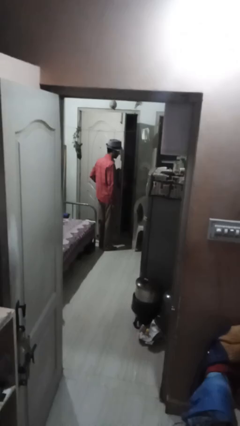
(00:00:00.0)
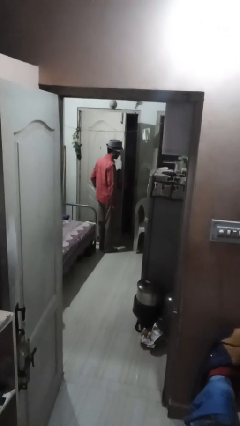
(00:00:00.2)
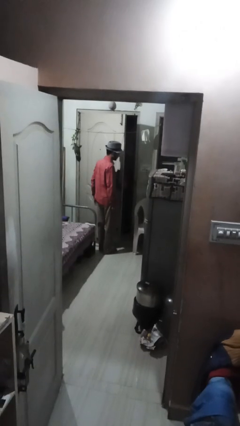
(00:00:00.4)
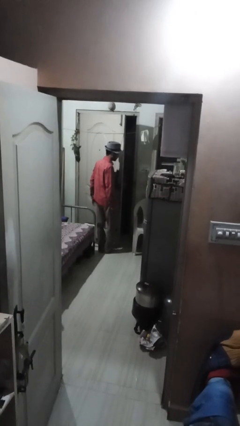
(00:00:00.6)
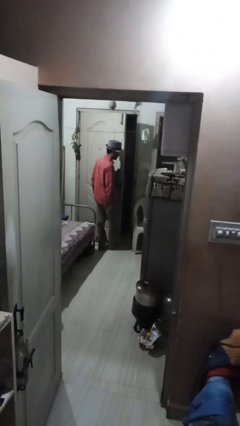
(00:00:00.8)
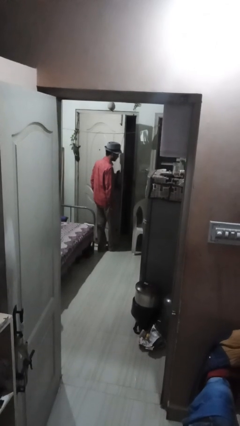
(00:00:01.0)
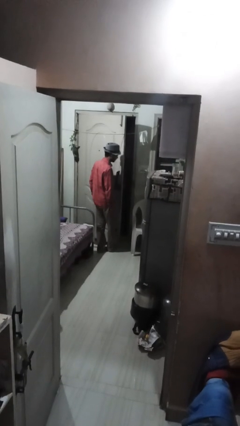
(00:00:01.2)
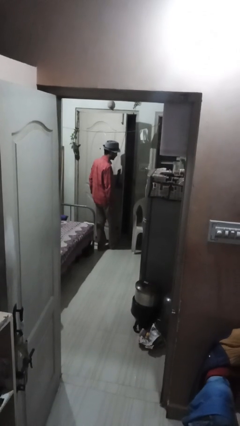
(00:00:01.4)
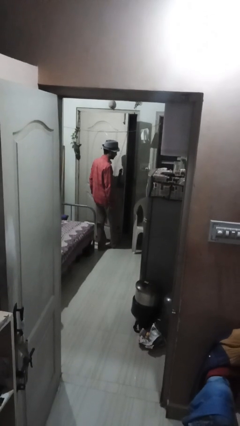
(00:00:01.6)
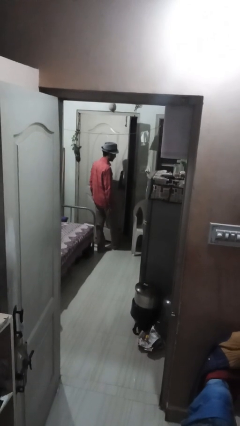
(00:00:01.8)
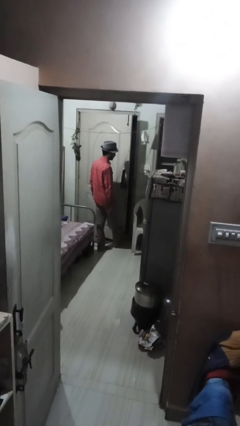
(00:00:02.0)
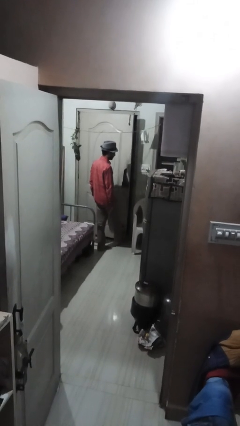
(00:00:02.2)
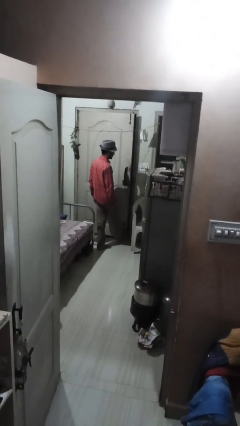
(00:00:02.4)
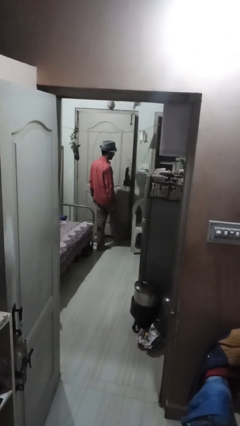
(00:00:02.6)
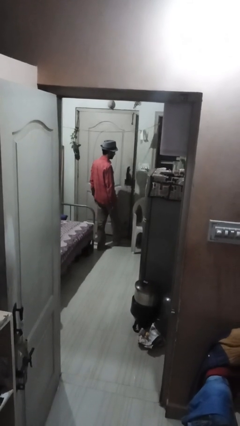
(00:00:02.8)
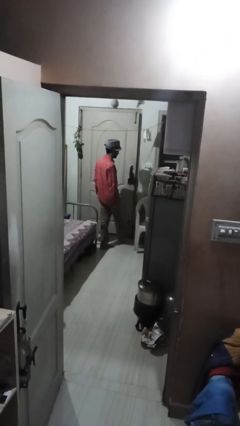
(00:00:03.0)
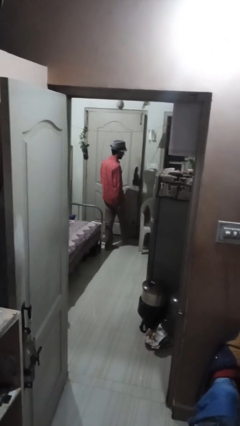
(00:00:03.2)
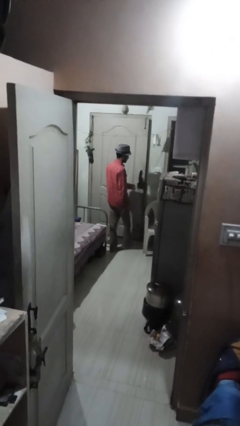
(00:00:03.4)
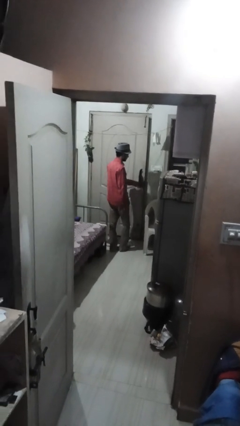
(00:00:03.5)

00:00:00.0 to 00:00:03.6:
person closes door with foot

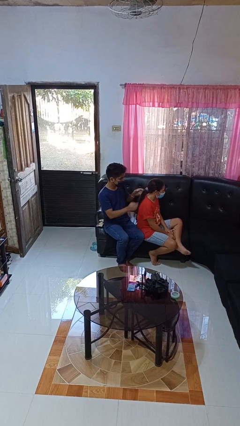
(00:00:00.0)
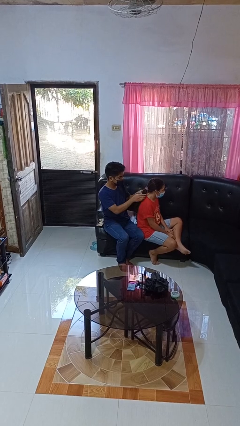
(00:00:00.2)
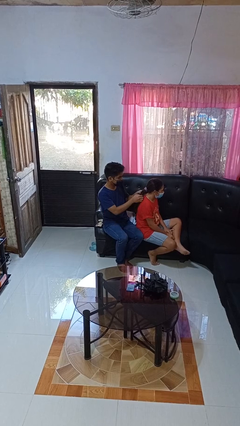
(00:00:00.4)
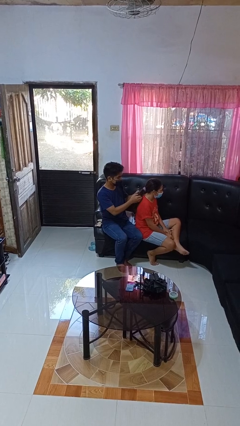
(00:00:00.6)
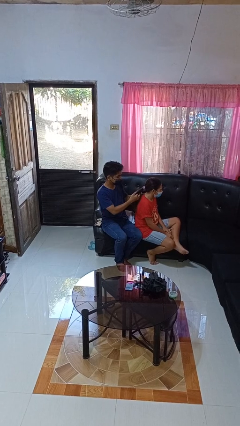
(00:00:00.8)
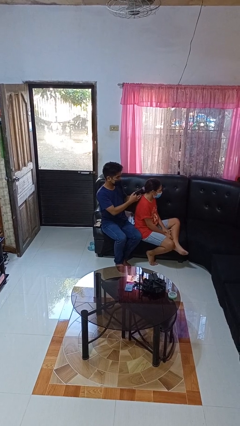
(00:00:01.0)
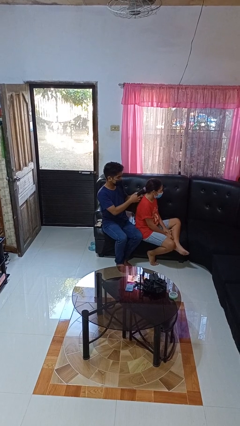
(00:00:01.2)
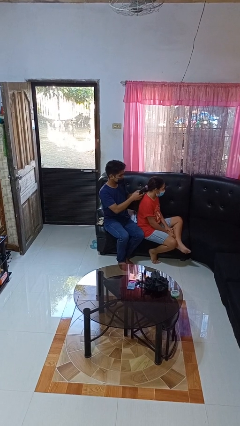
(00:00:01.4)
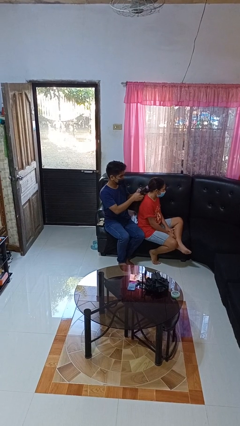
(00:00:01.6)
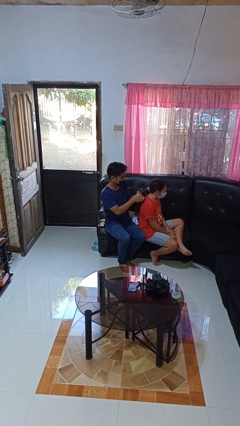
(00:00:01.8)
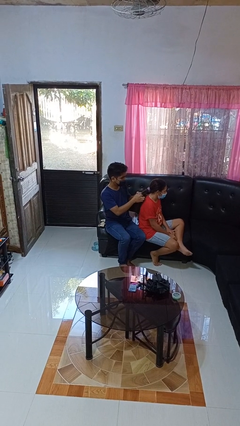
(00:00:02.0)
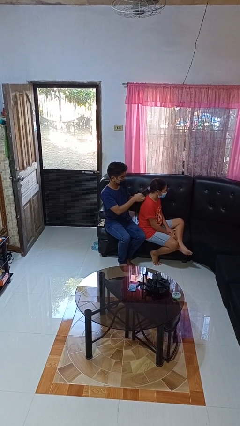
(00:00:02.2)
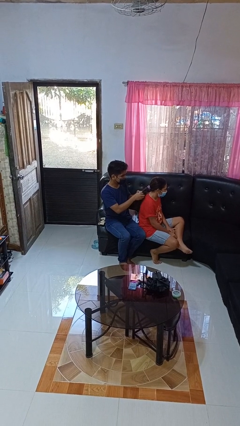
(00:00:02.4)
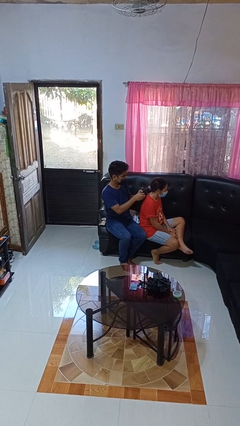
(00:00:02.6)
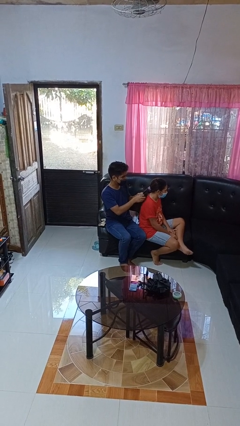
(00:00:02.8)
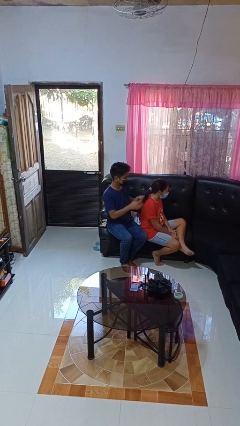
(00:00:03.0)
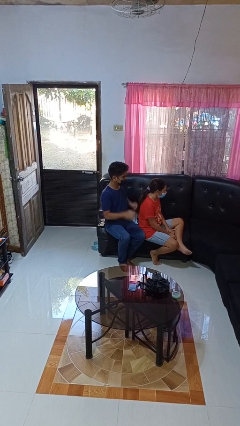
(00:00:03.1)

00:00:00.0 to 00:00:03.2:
person braids hair of person

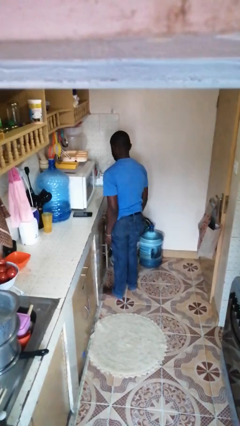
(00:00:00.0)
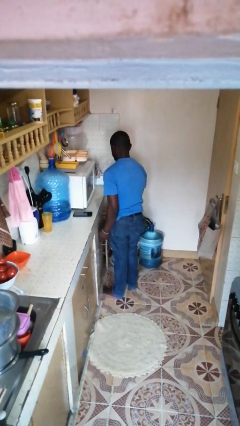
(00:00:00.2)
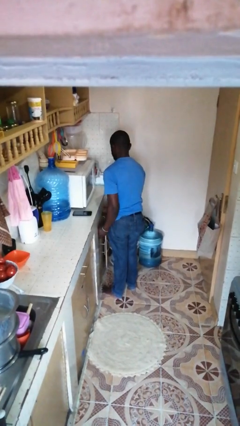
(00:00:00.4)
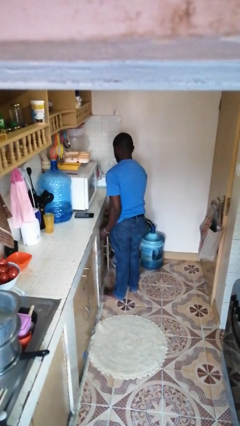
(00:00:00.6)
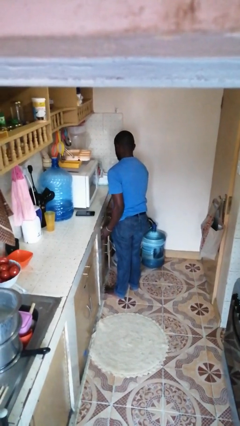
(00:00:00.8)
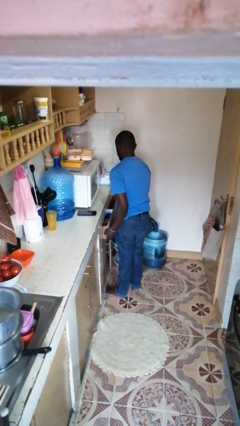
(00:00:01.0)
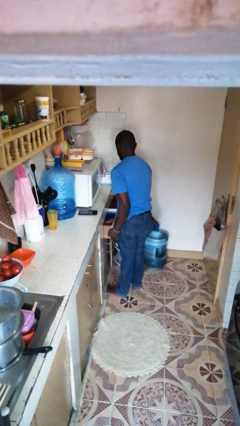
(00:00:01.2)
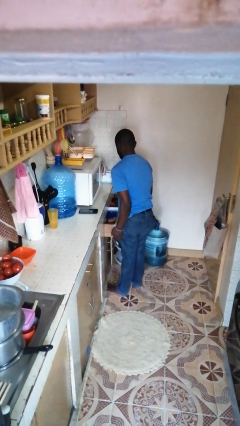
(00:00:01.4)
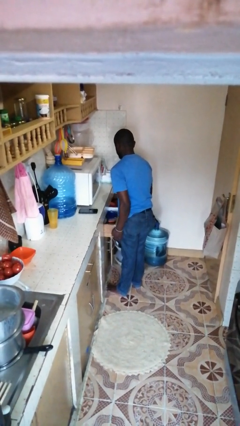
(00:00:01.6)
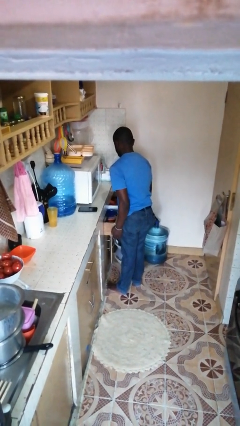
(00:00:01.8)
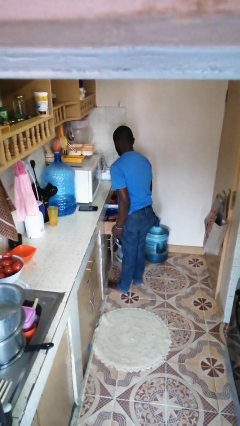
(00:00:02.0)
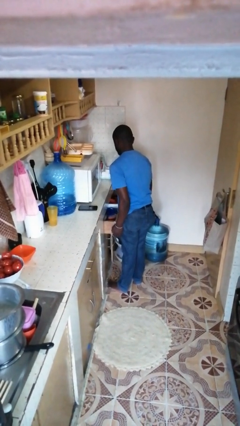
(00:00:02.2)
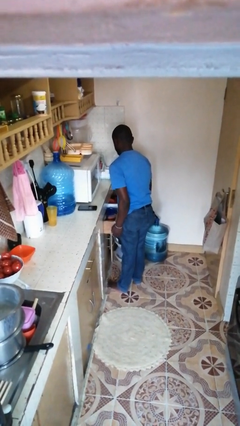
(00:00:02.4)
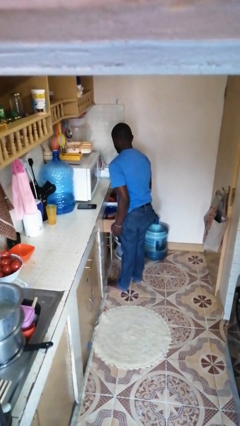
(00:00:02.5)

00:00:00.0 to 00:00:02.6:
person opens kitchen drawer

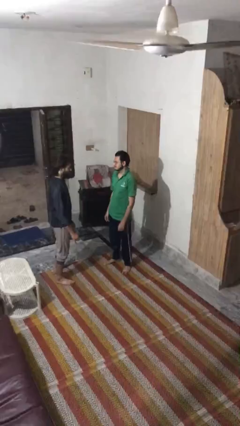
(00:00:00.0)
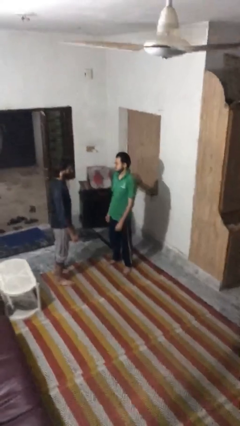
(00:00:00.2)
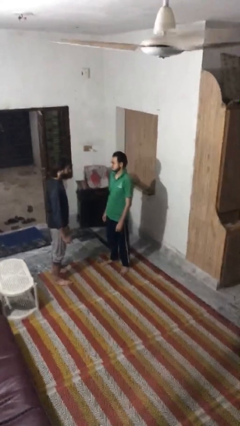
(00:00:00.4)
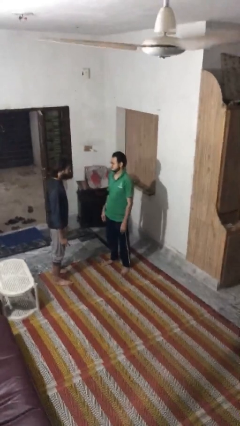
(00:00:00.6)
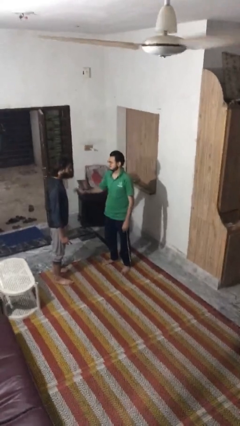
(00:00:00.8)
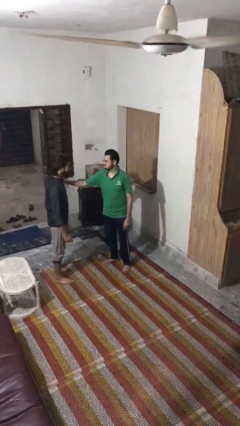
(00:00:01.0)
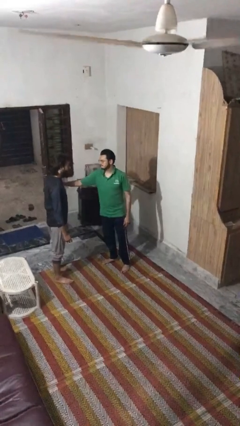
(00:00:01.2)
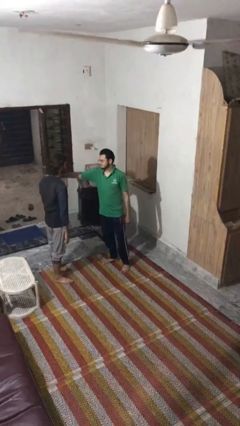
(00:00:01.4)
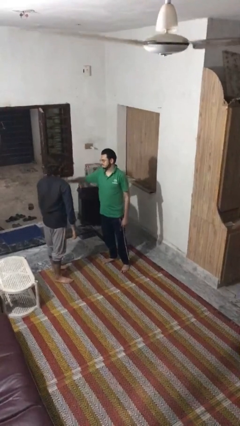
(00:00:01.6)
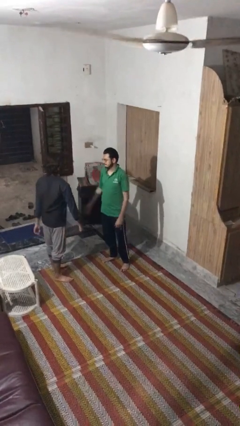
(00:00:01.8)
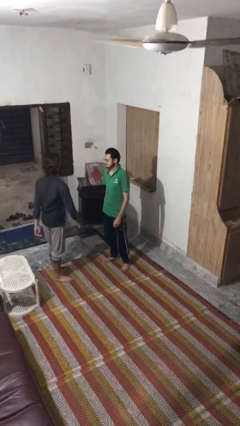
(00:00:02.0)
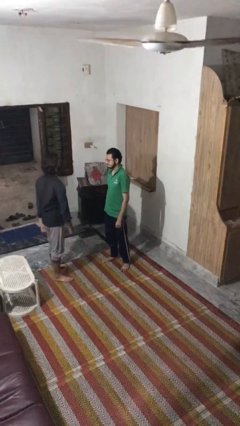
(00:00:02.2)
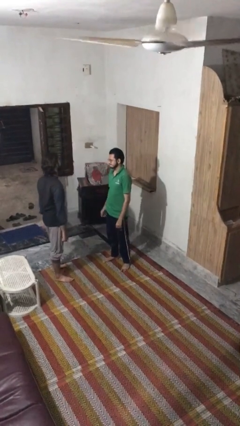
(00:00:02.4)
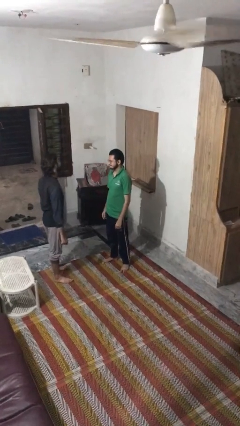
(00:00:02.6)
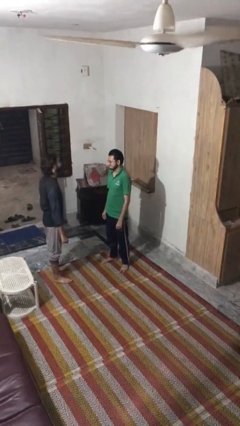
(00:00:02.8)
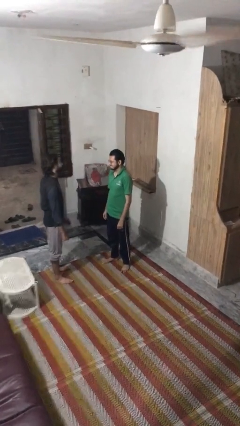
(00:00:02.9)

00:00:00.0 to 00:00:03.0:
person shoves person

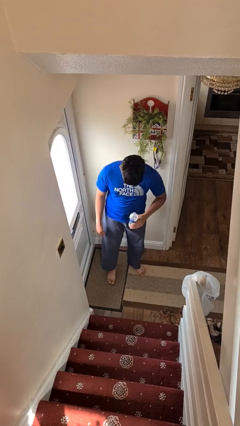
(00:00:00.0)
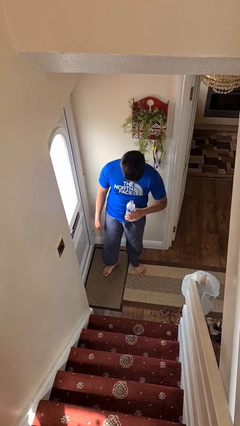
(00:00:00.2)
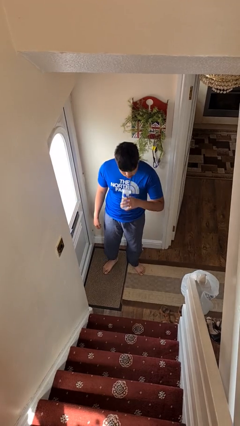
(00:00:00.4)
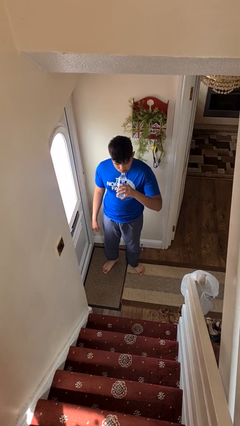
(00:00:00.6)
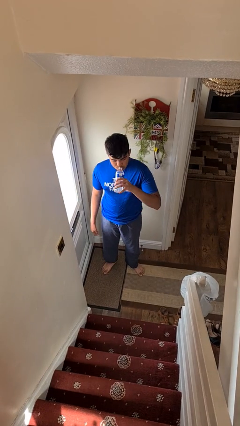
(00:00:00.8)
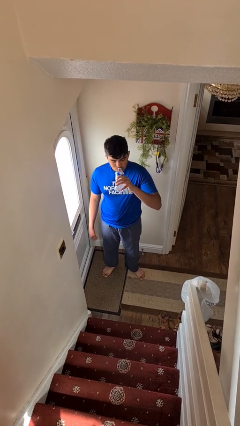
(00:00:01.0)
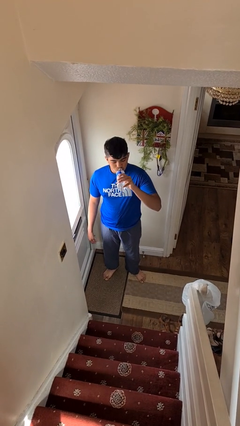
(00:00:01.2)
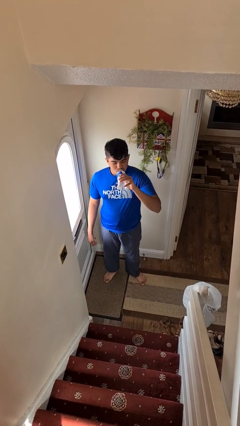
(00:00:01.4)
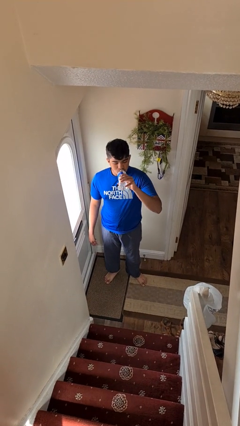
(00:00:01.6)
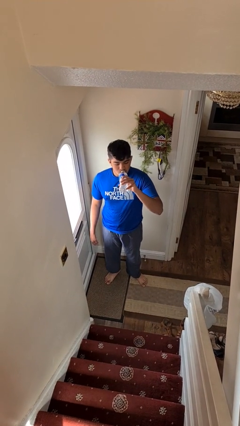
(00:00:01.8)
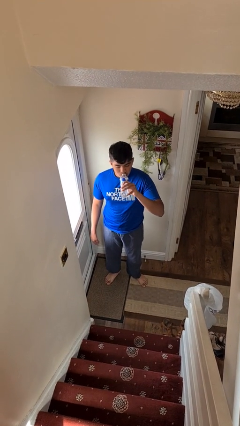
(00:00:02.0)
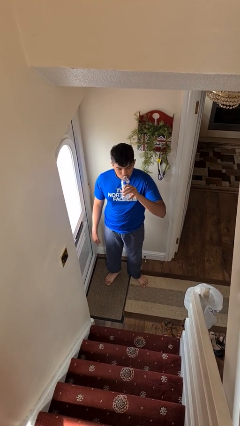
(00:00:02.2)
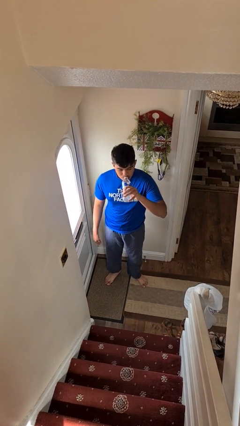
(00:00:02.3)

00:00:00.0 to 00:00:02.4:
person drinks from bottle

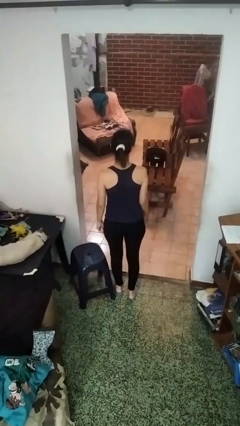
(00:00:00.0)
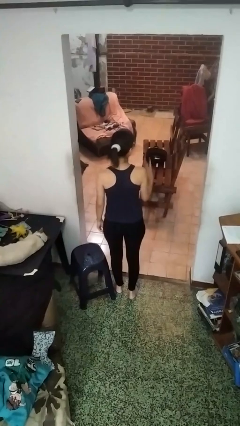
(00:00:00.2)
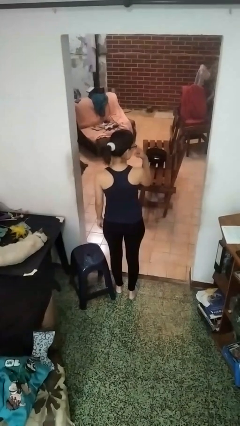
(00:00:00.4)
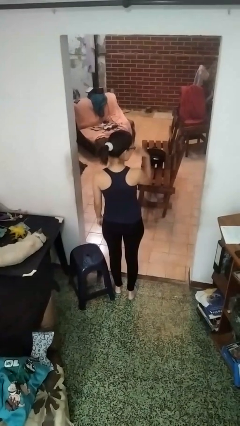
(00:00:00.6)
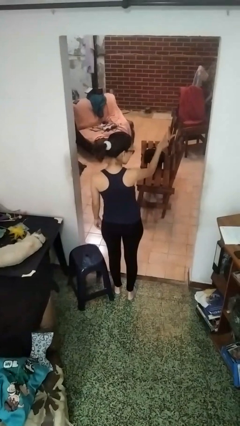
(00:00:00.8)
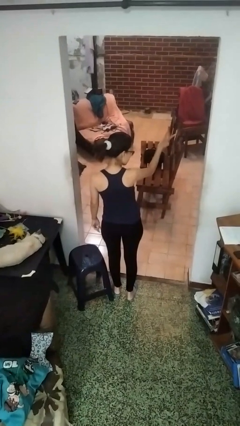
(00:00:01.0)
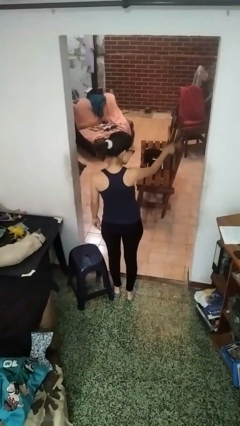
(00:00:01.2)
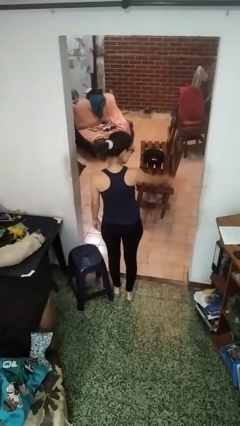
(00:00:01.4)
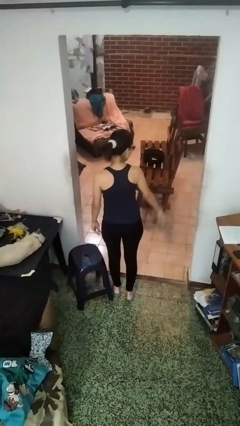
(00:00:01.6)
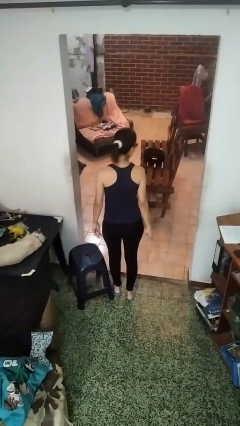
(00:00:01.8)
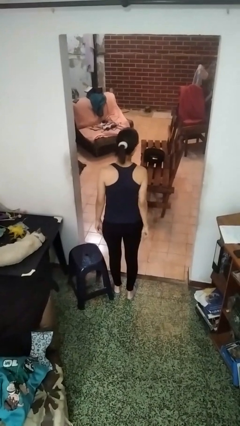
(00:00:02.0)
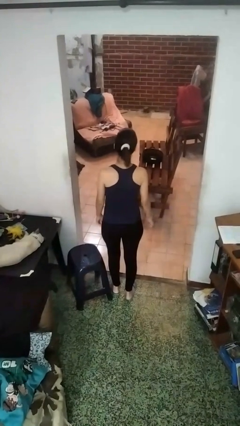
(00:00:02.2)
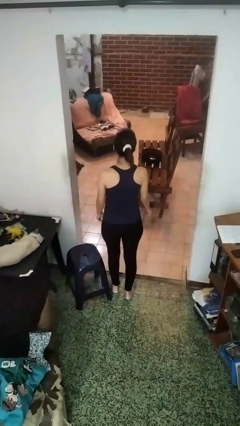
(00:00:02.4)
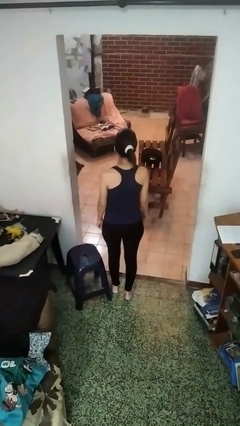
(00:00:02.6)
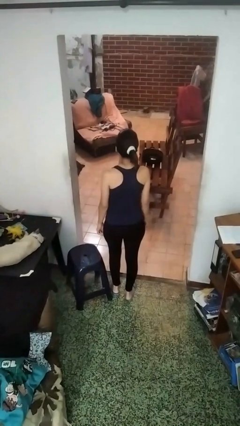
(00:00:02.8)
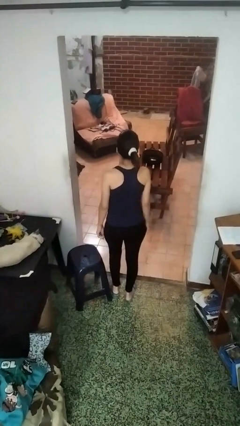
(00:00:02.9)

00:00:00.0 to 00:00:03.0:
person gestures watch closely
